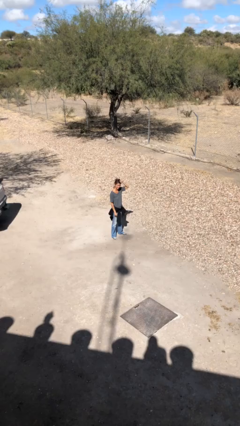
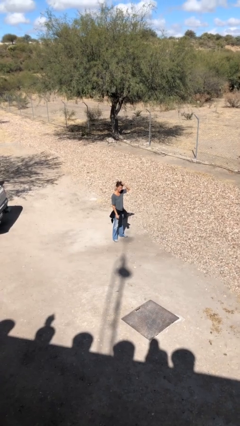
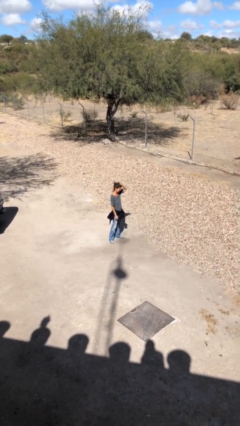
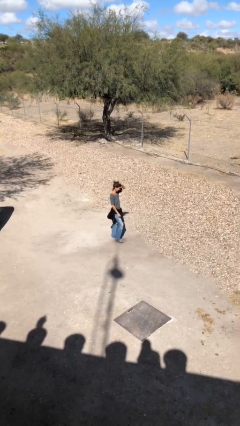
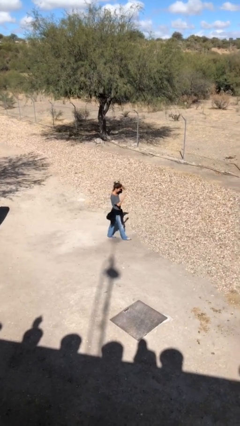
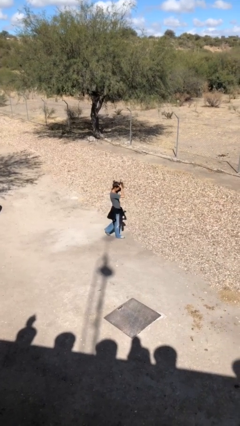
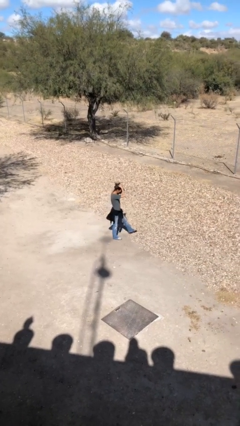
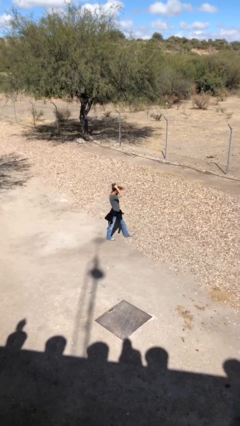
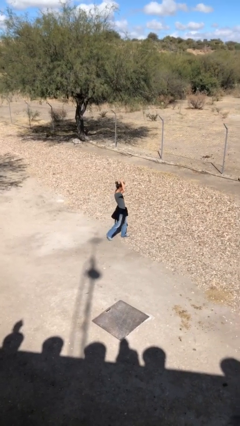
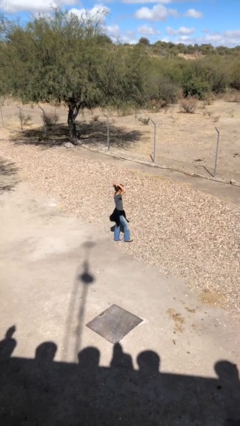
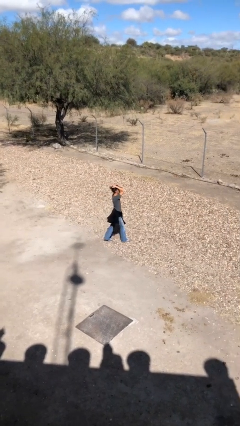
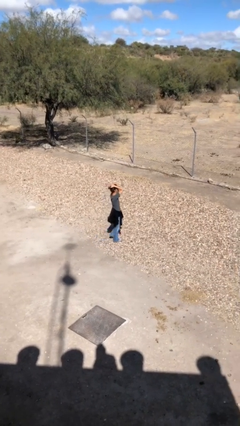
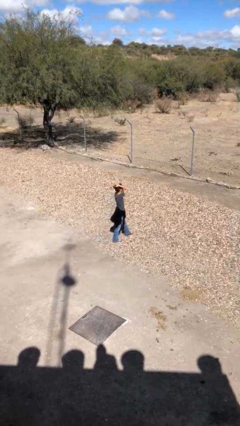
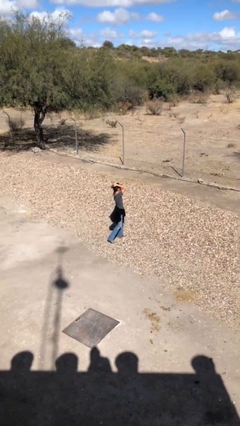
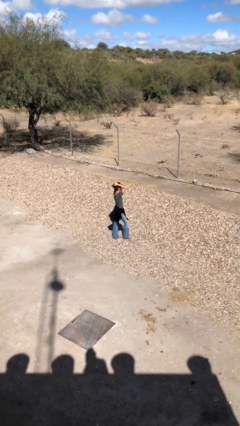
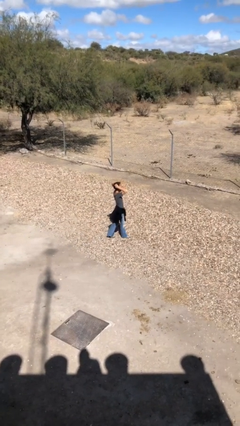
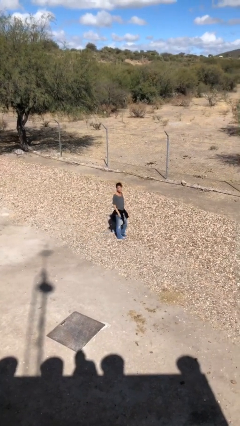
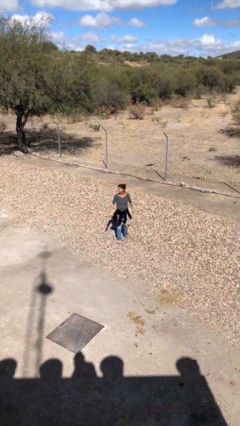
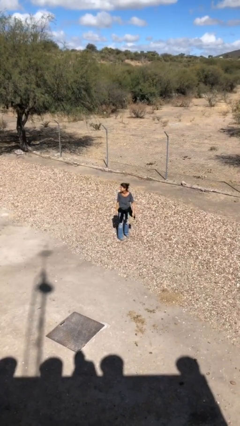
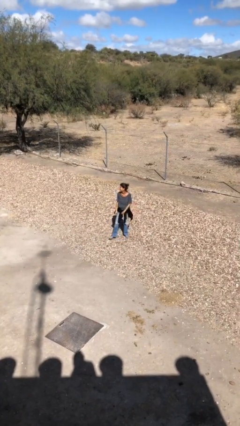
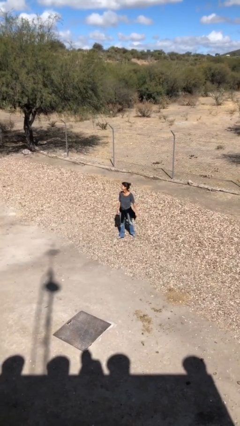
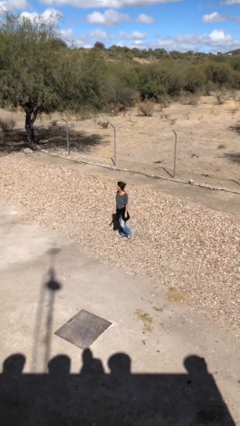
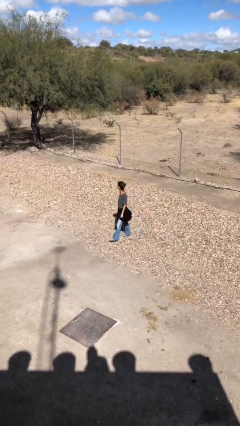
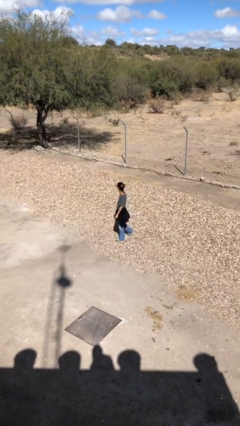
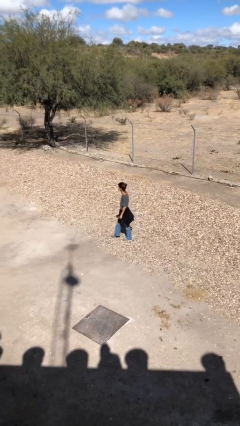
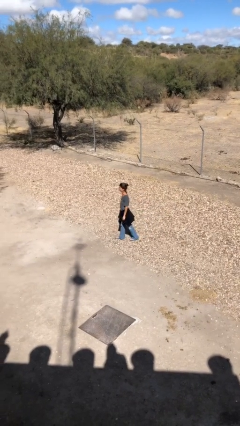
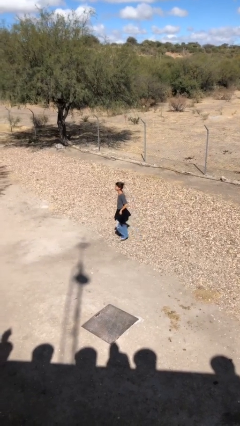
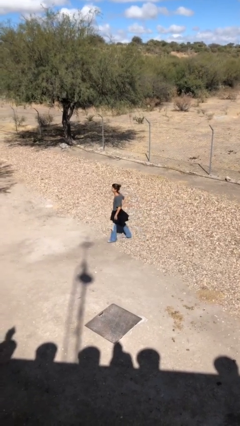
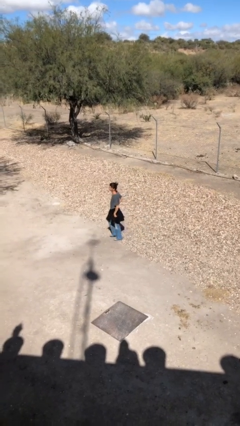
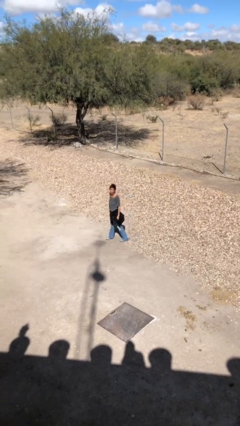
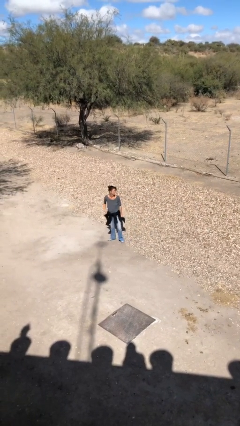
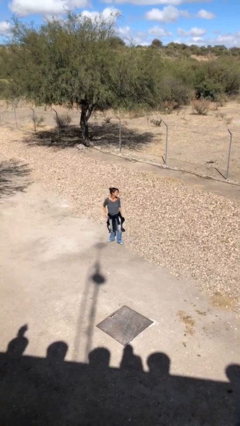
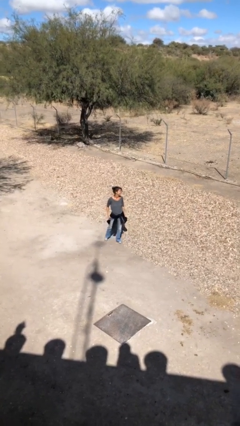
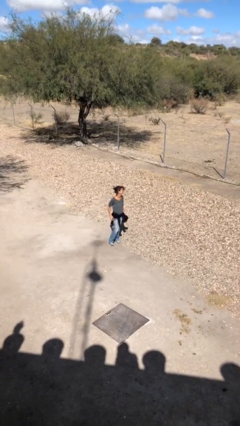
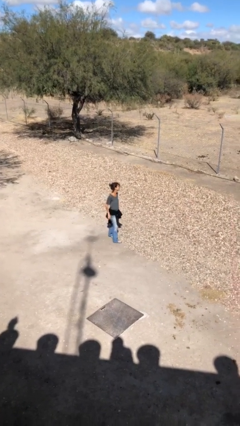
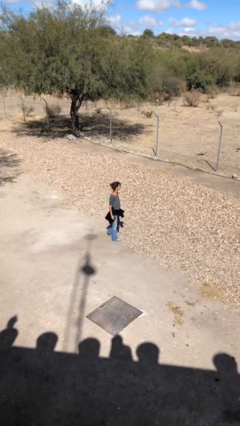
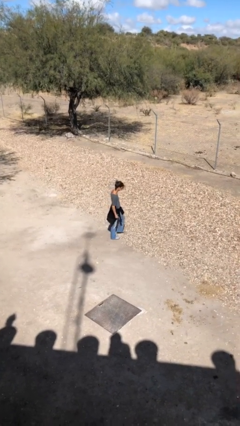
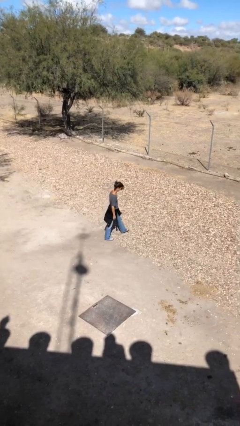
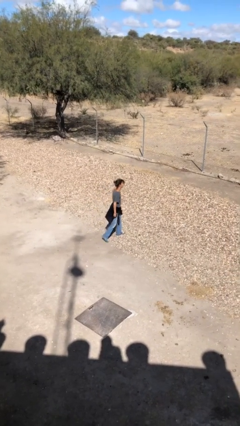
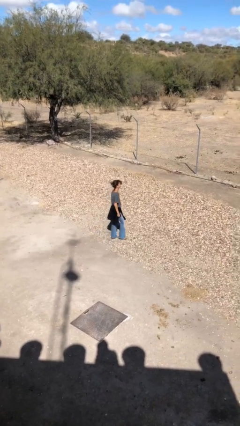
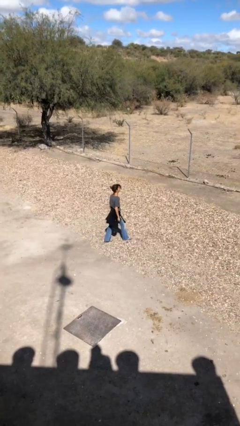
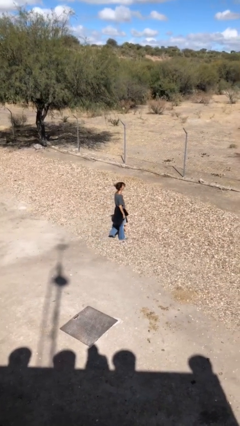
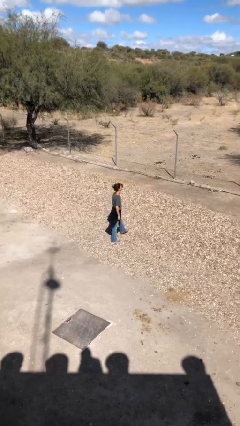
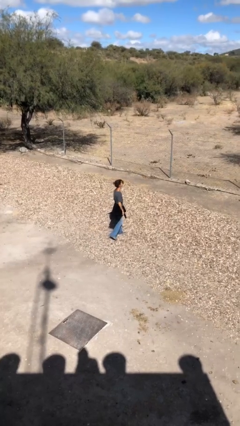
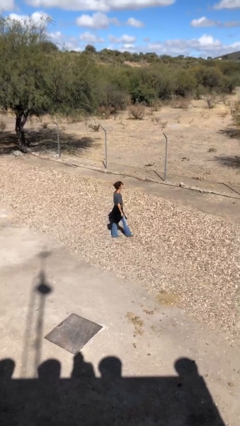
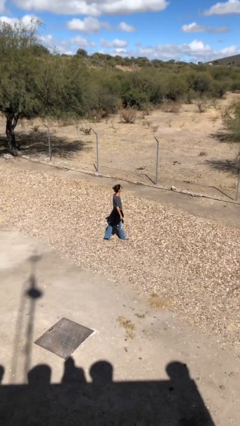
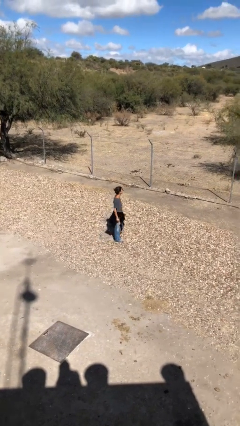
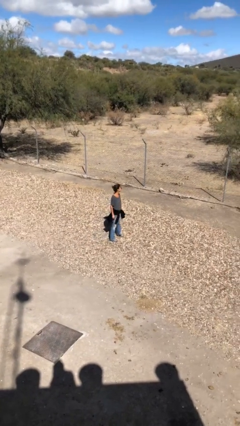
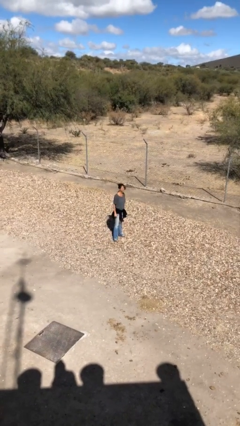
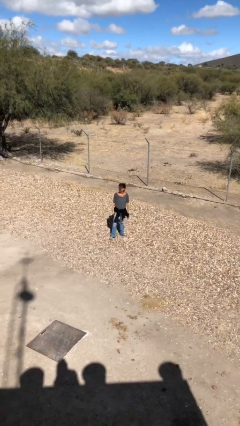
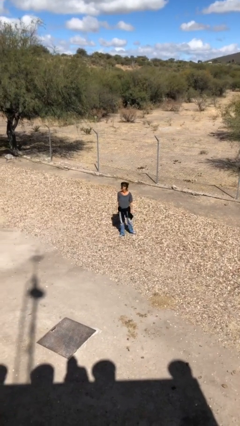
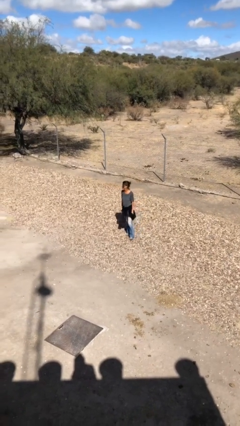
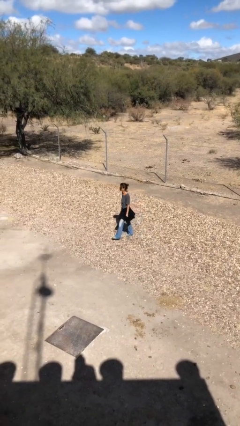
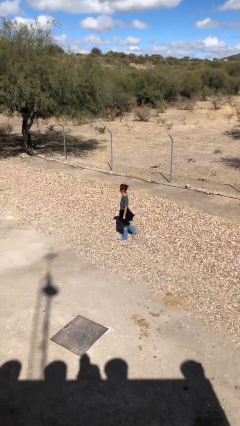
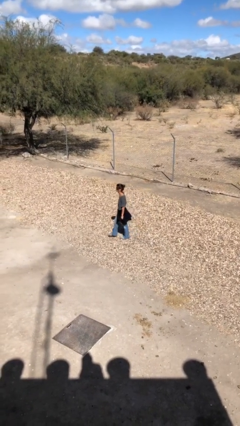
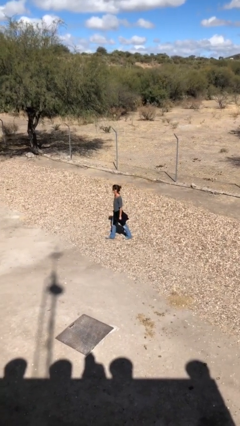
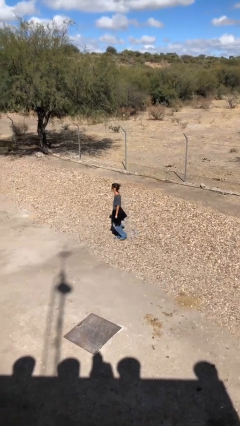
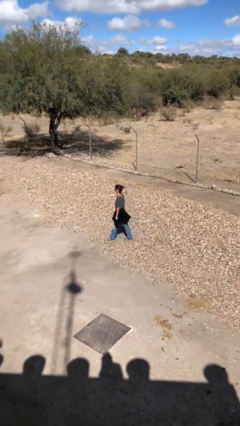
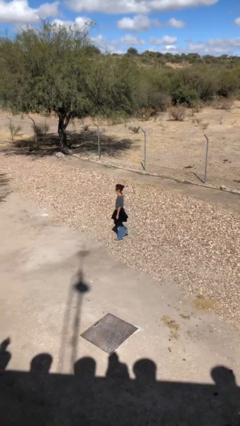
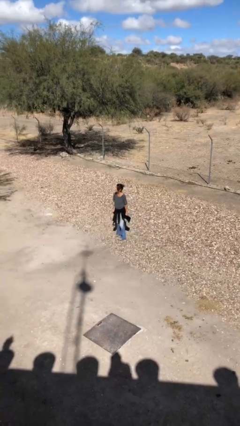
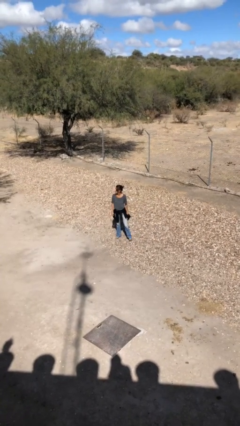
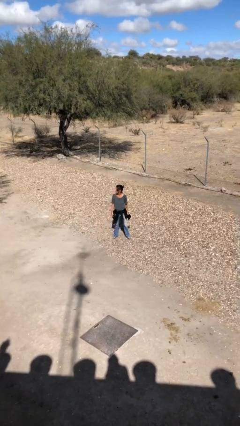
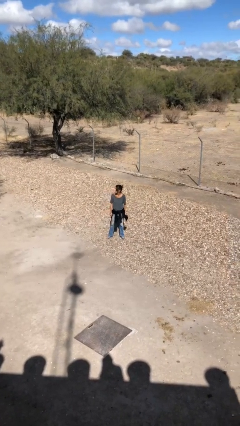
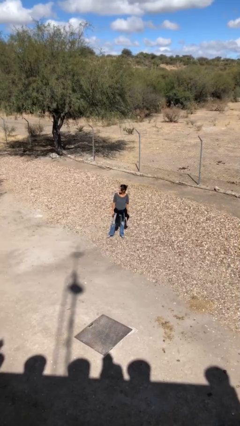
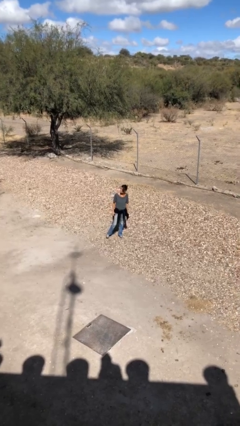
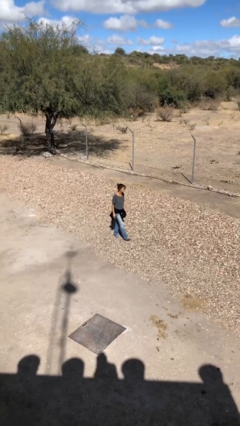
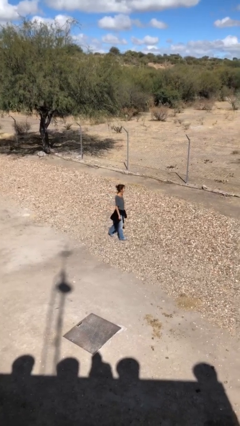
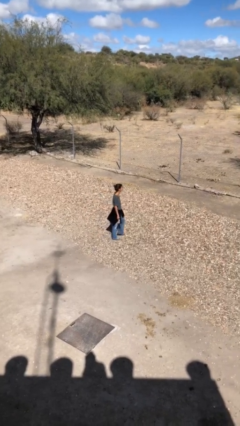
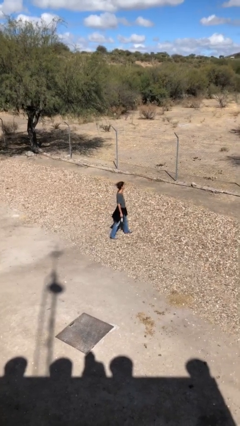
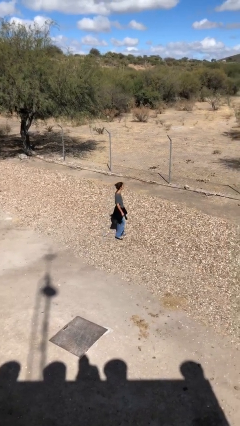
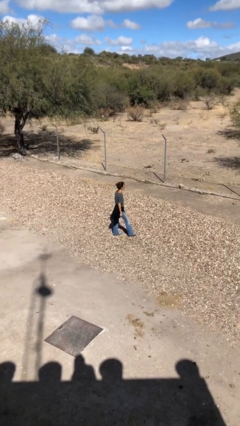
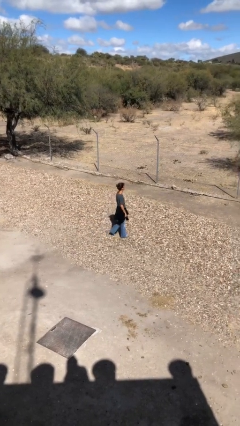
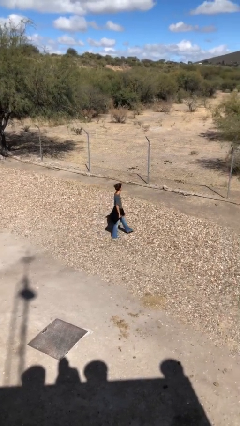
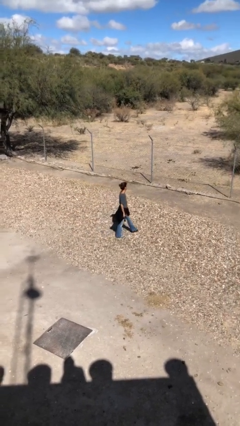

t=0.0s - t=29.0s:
person walks

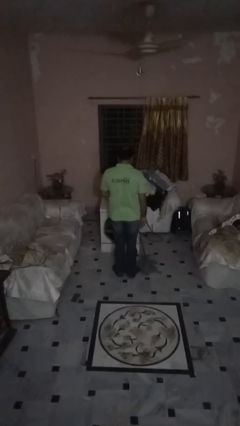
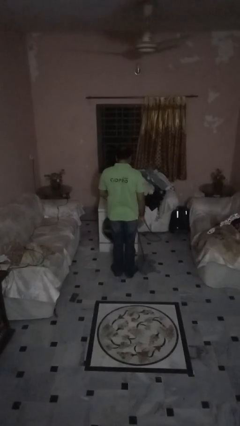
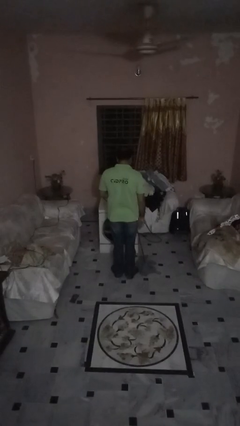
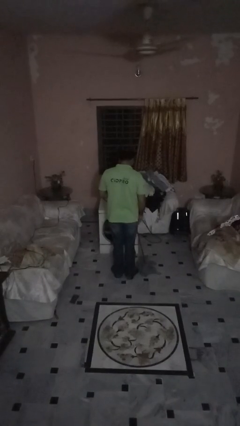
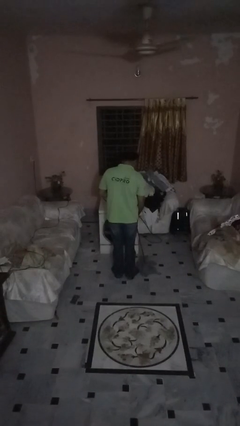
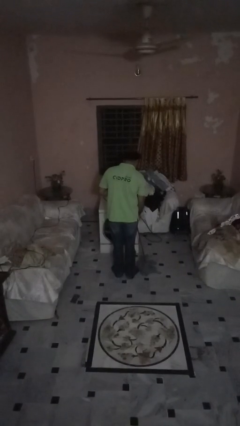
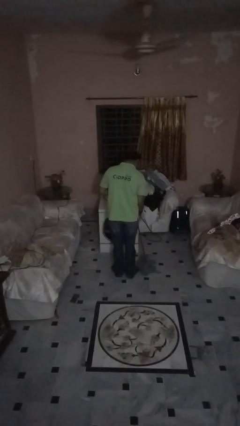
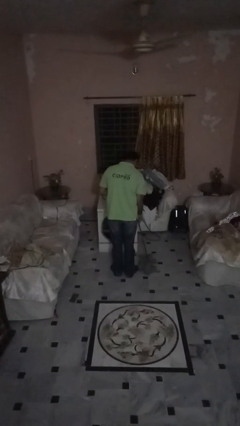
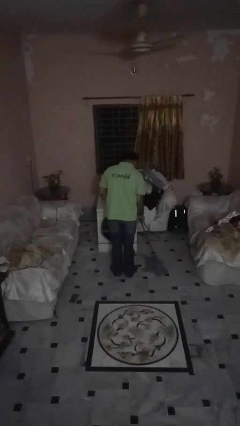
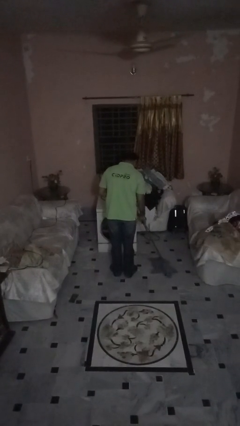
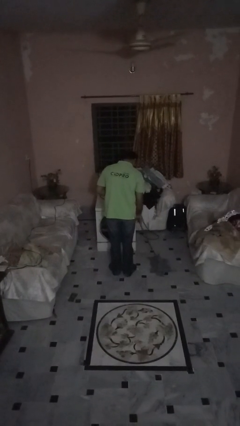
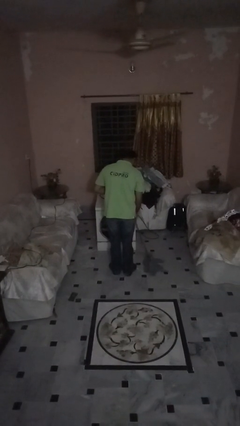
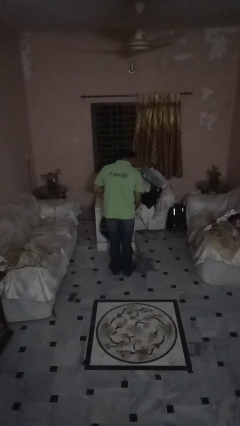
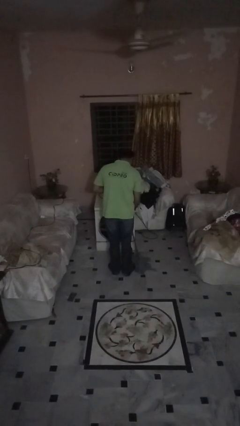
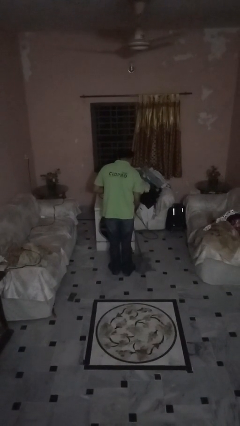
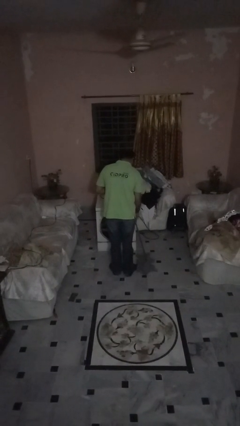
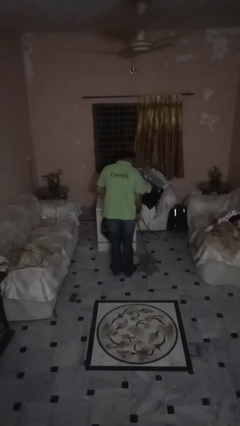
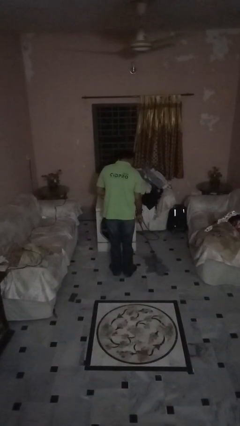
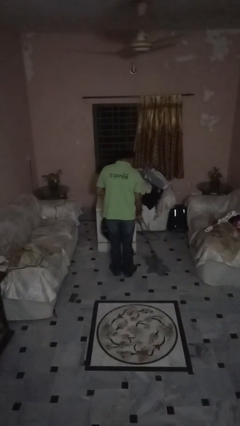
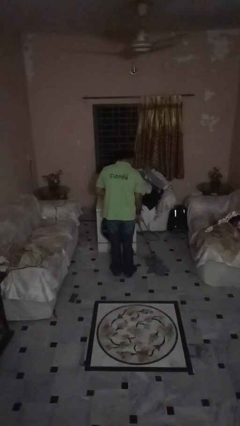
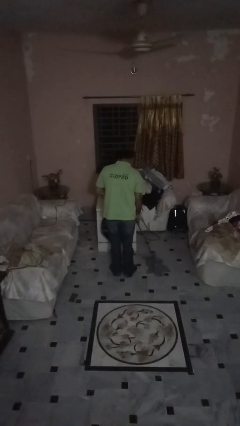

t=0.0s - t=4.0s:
person mops
